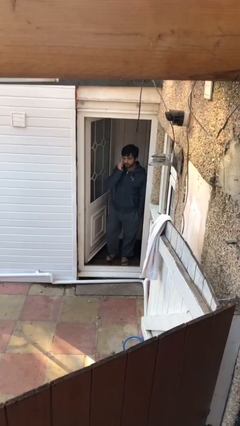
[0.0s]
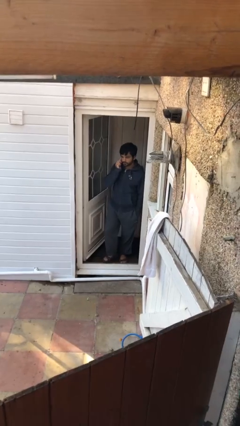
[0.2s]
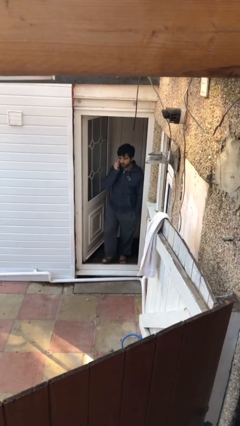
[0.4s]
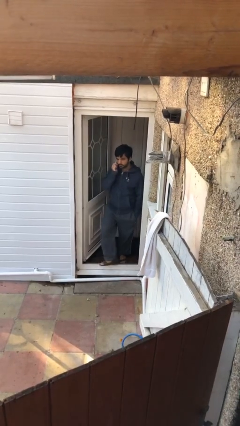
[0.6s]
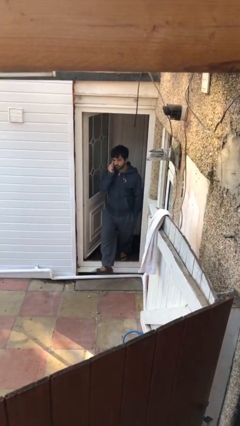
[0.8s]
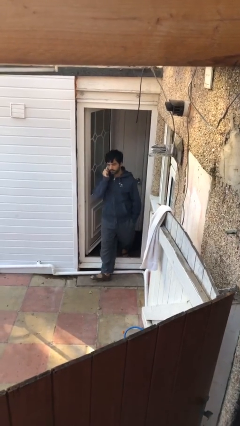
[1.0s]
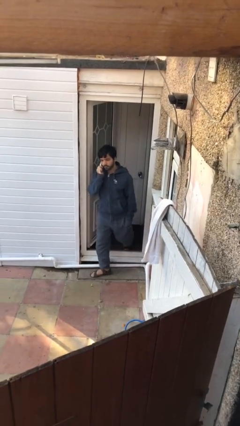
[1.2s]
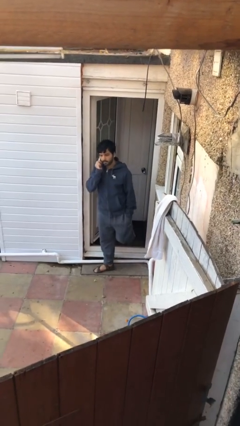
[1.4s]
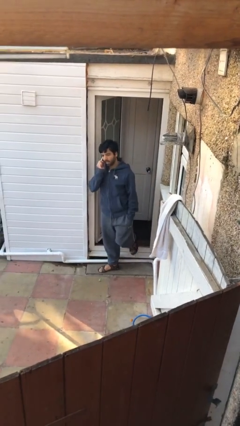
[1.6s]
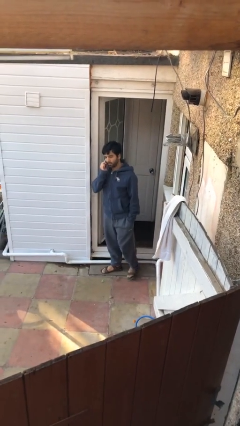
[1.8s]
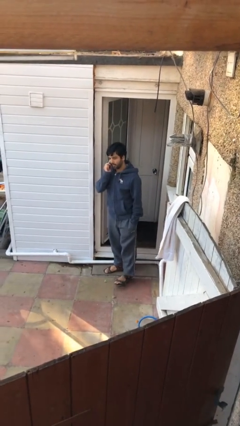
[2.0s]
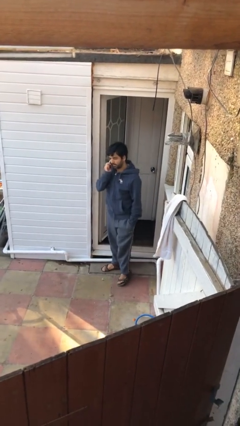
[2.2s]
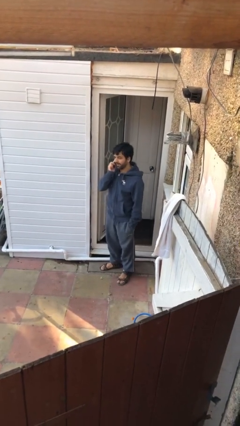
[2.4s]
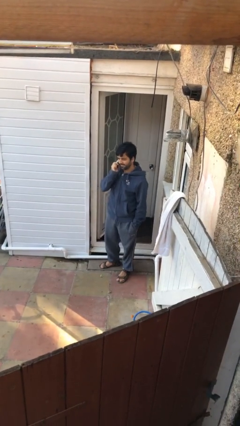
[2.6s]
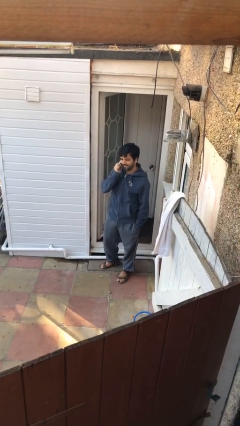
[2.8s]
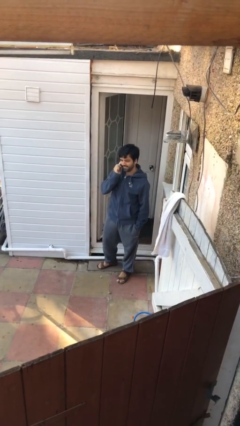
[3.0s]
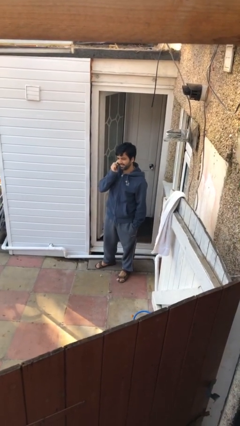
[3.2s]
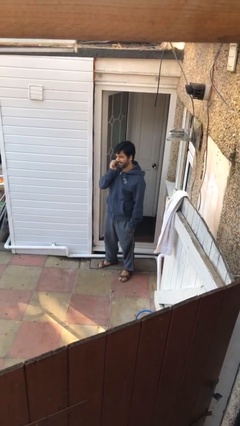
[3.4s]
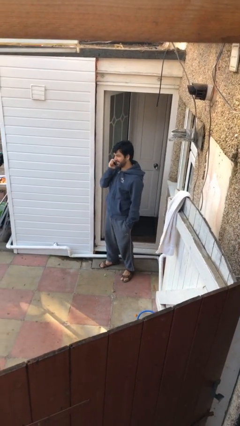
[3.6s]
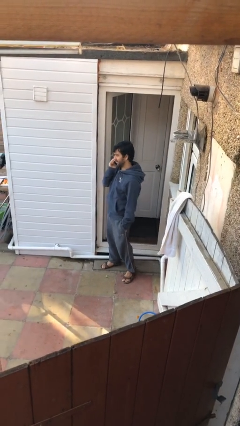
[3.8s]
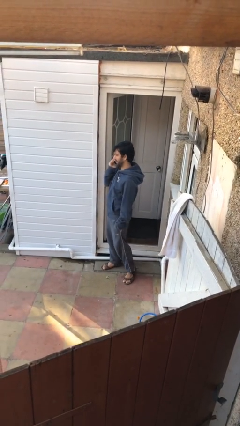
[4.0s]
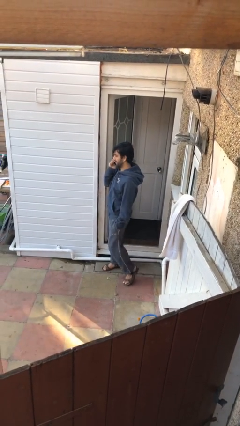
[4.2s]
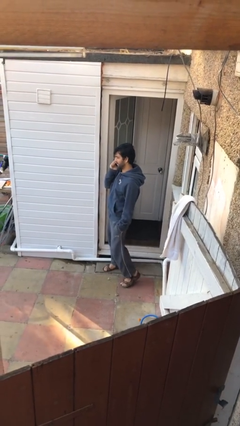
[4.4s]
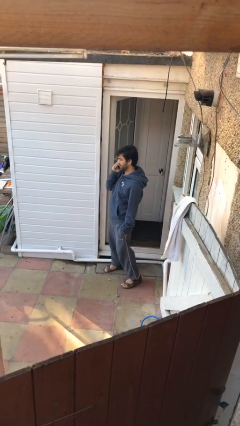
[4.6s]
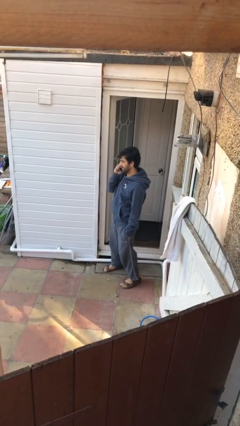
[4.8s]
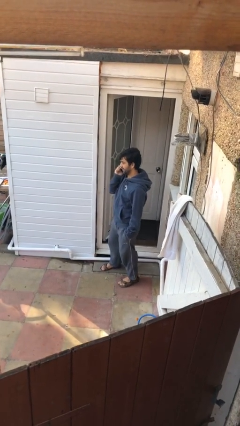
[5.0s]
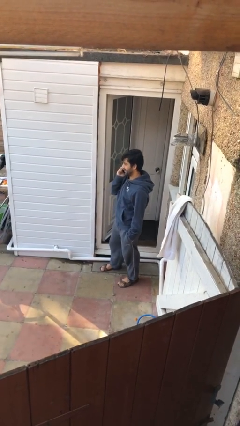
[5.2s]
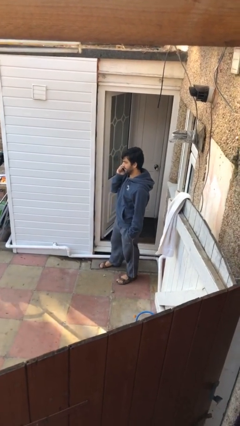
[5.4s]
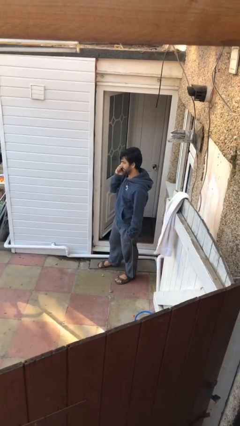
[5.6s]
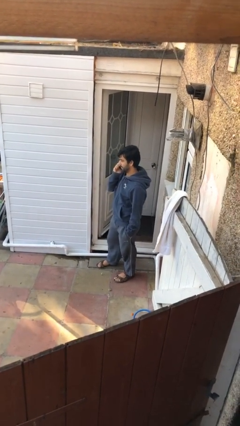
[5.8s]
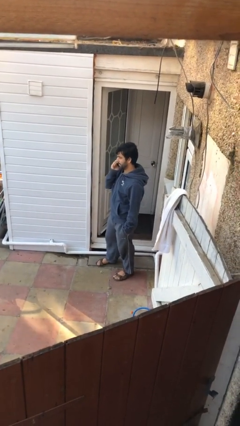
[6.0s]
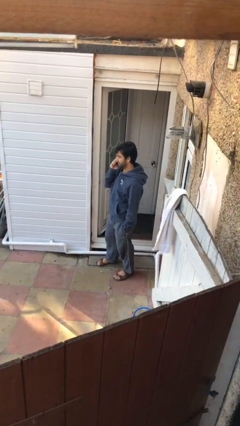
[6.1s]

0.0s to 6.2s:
person enters scene through structure

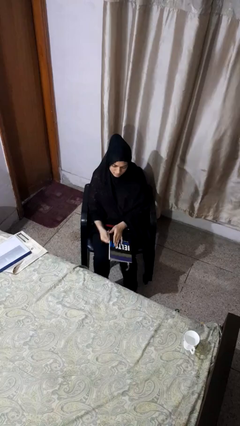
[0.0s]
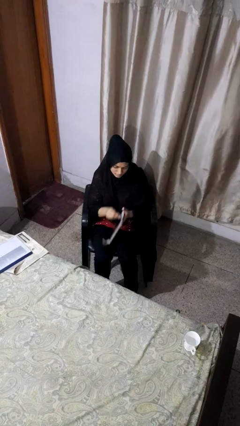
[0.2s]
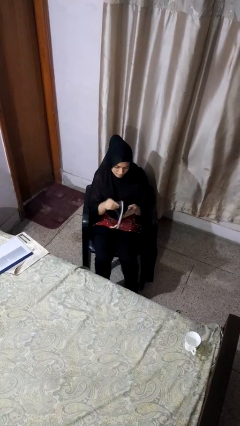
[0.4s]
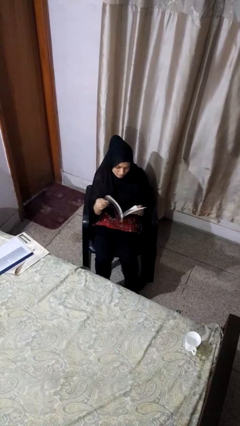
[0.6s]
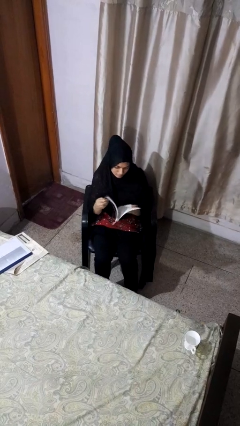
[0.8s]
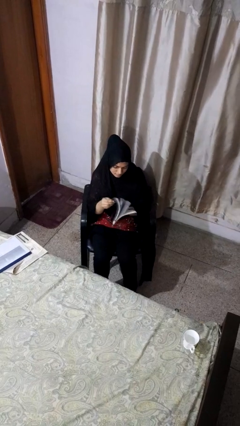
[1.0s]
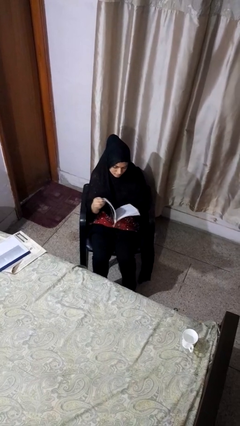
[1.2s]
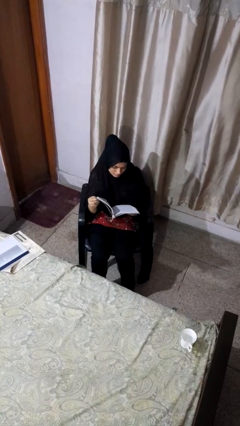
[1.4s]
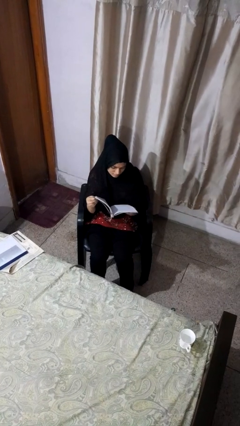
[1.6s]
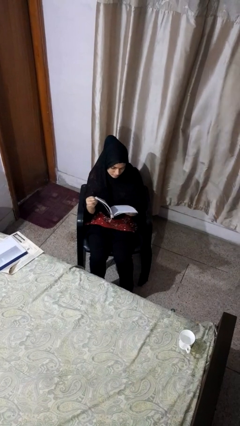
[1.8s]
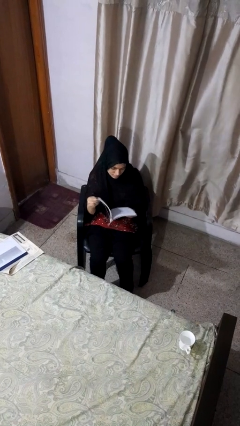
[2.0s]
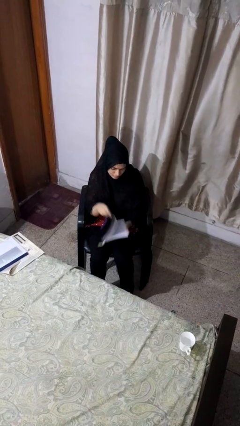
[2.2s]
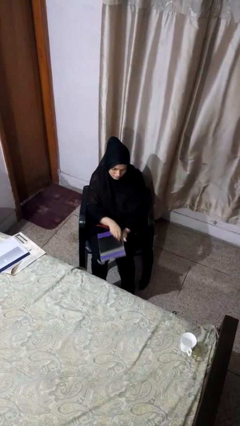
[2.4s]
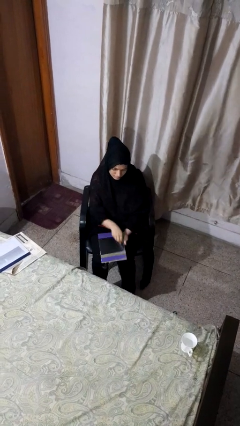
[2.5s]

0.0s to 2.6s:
person reads book

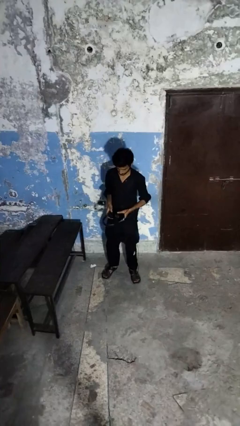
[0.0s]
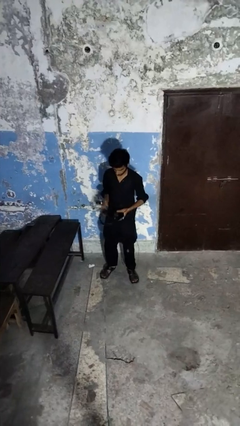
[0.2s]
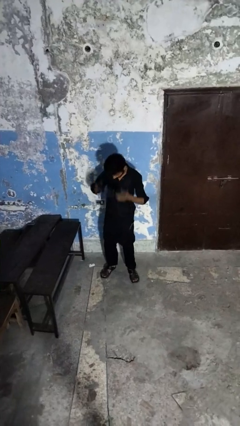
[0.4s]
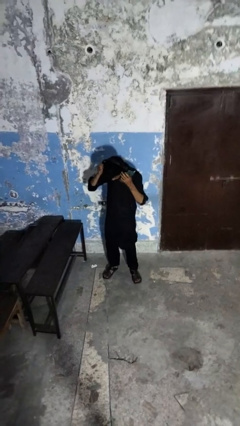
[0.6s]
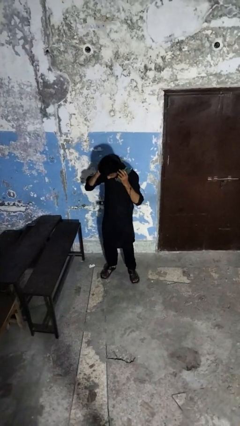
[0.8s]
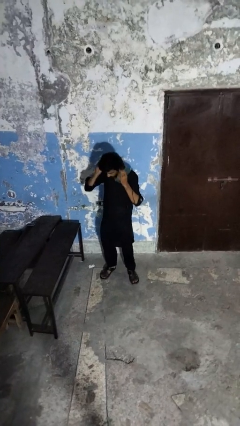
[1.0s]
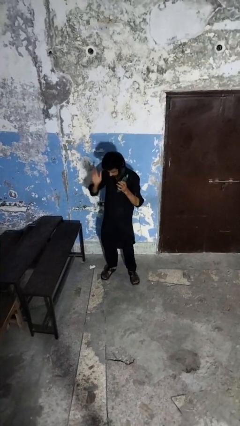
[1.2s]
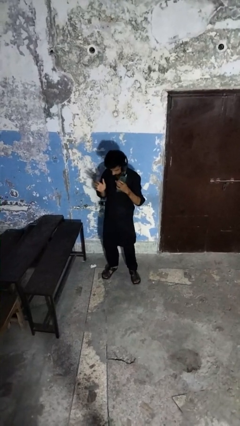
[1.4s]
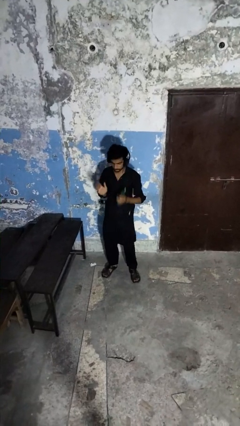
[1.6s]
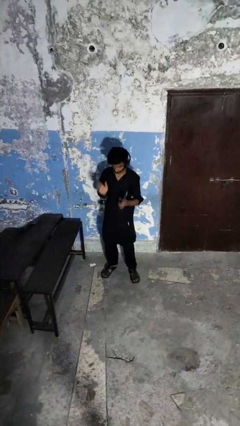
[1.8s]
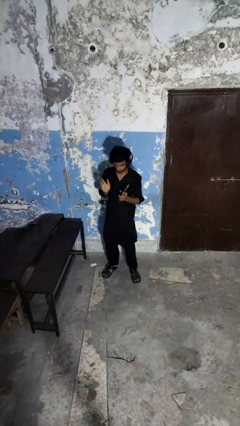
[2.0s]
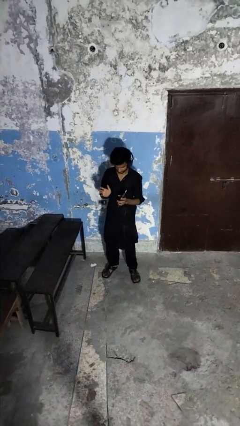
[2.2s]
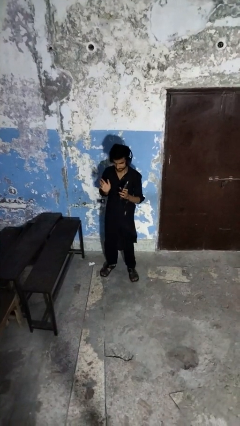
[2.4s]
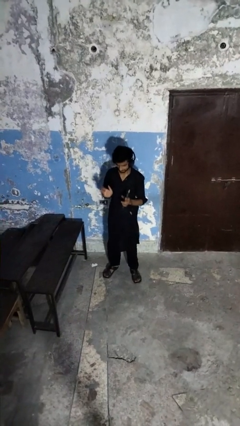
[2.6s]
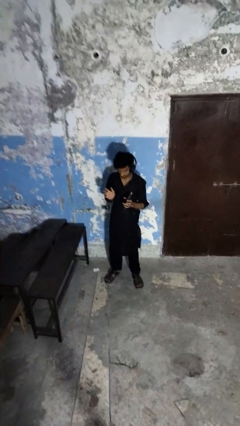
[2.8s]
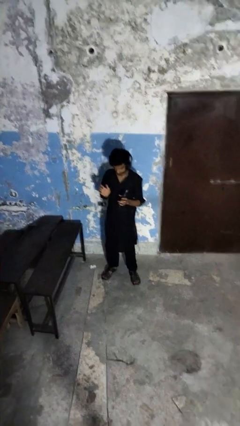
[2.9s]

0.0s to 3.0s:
person puts on headphones

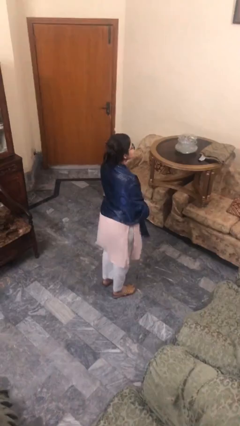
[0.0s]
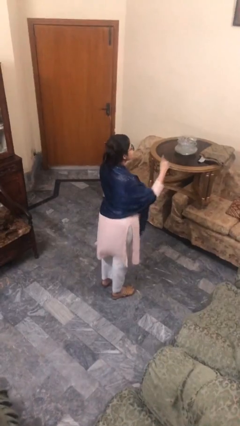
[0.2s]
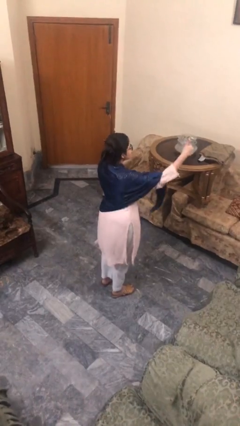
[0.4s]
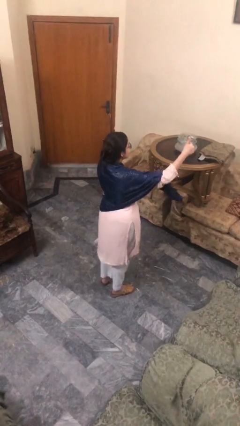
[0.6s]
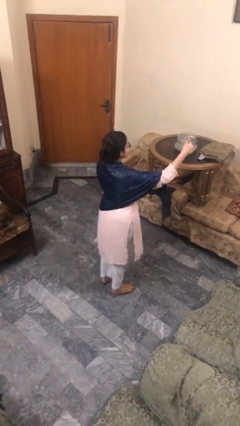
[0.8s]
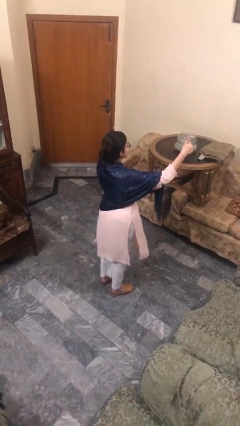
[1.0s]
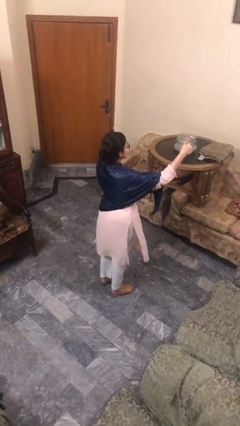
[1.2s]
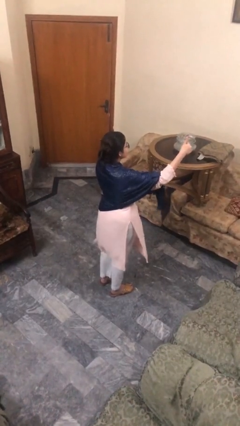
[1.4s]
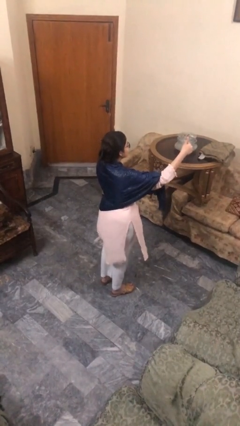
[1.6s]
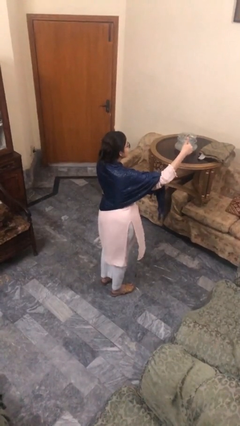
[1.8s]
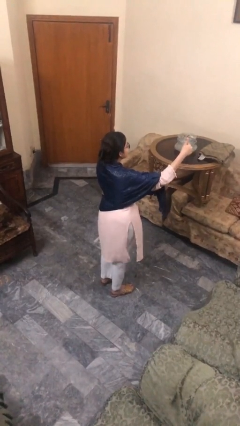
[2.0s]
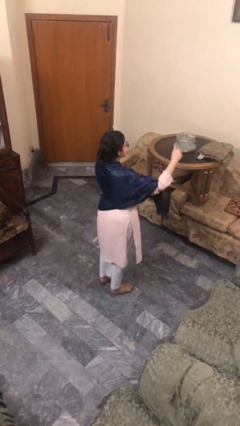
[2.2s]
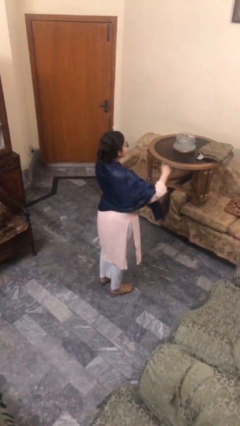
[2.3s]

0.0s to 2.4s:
person gestures thumbs up

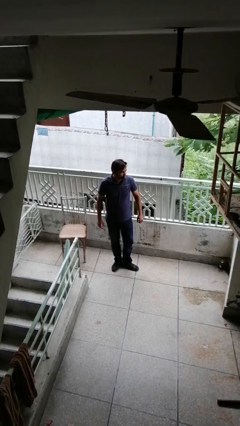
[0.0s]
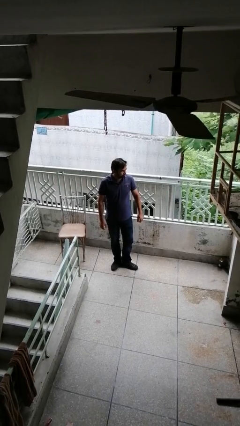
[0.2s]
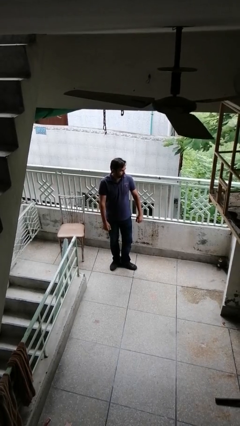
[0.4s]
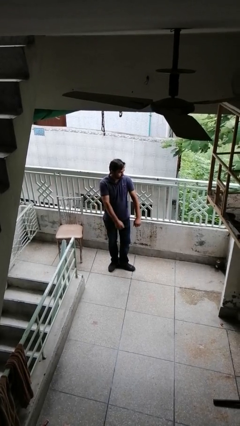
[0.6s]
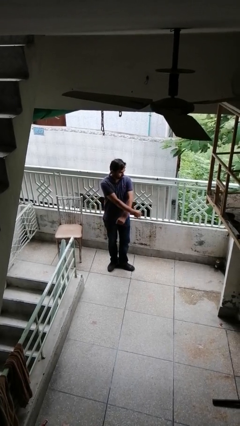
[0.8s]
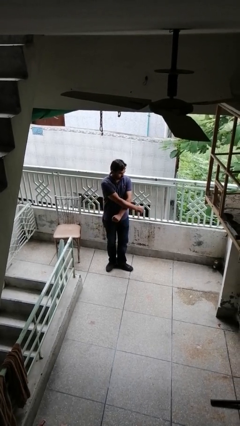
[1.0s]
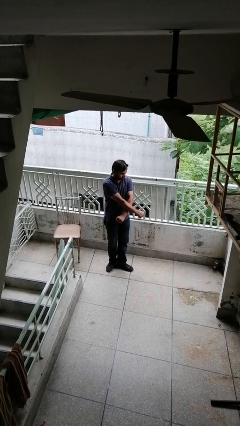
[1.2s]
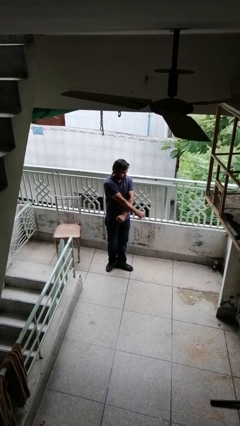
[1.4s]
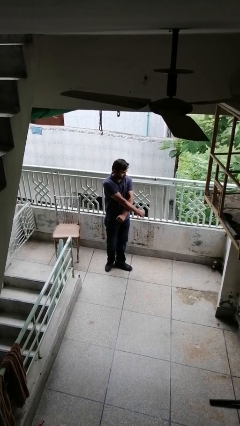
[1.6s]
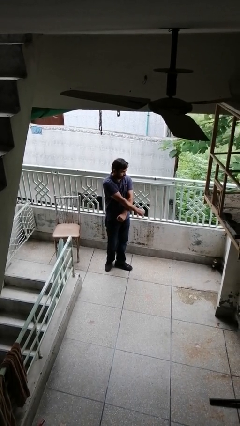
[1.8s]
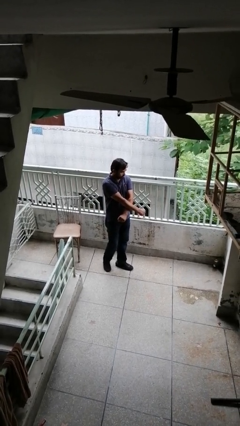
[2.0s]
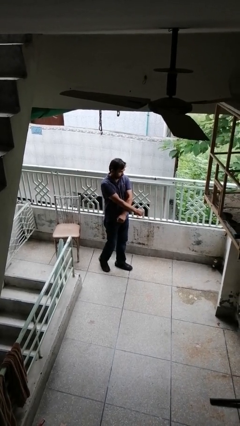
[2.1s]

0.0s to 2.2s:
person gestures arms x

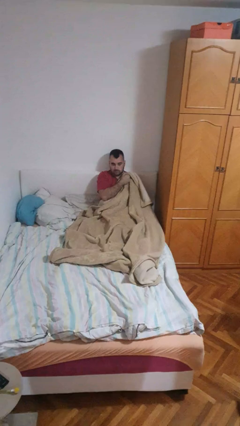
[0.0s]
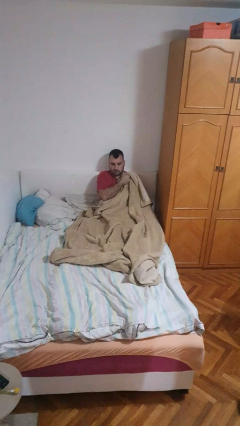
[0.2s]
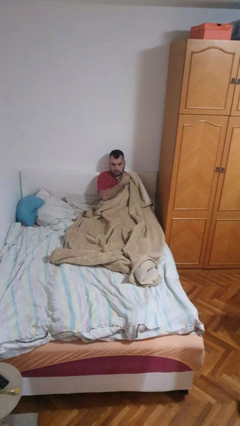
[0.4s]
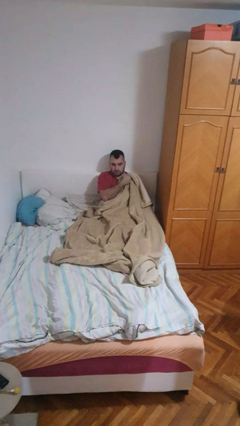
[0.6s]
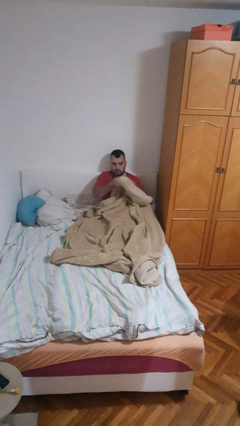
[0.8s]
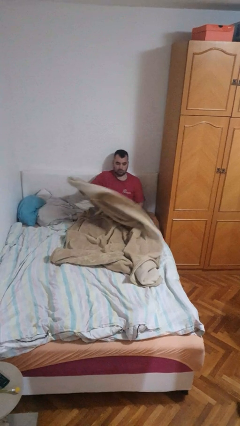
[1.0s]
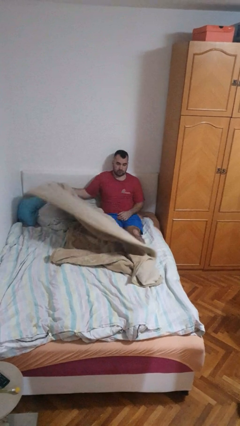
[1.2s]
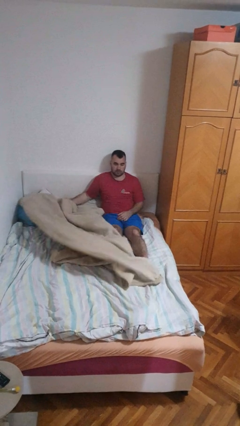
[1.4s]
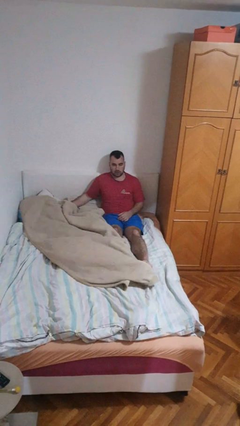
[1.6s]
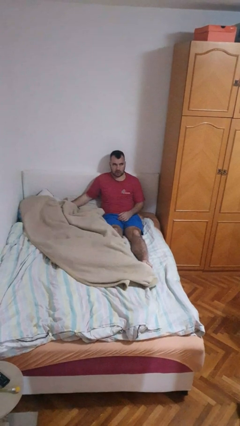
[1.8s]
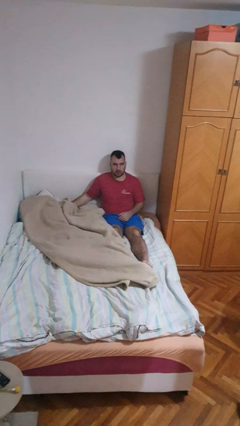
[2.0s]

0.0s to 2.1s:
person uncovers with blanket
